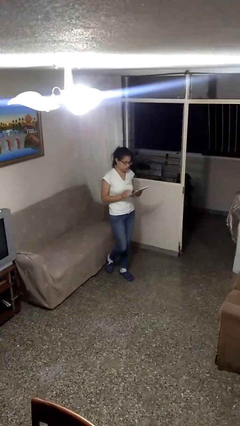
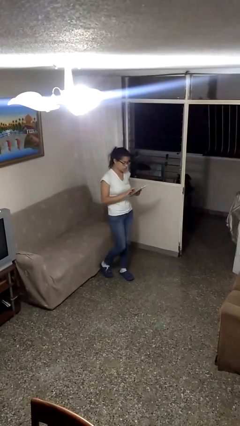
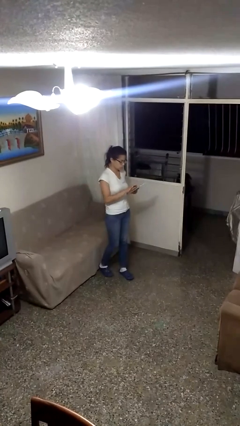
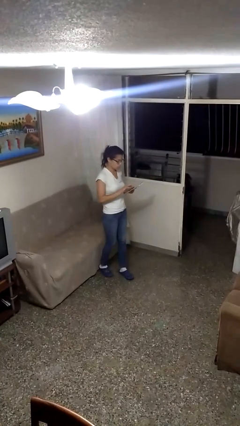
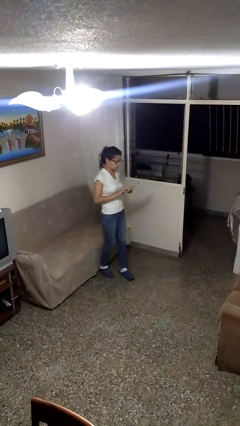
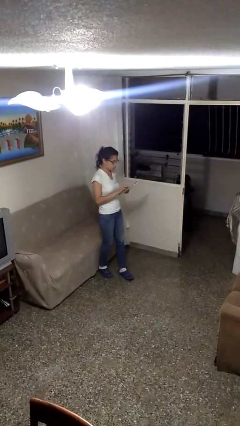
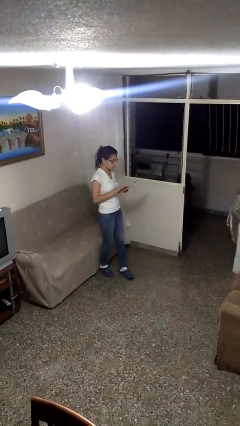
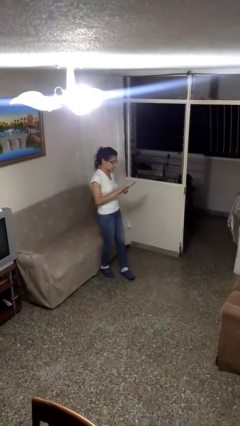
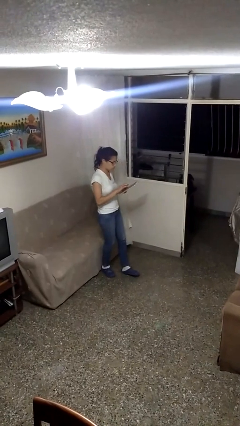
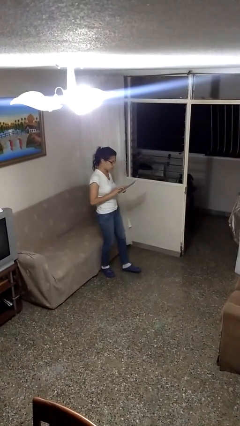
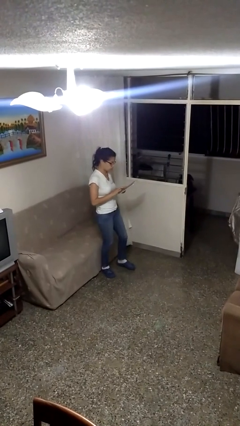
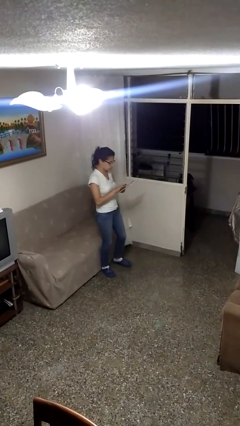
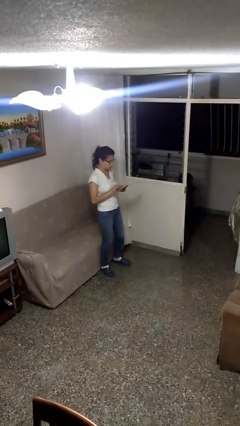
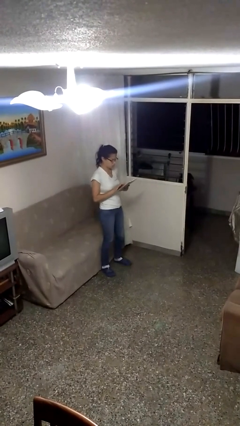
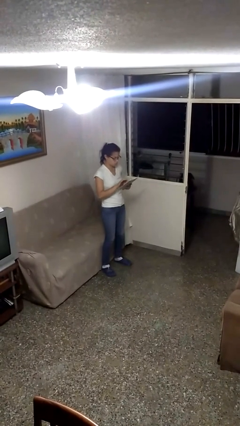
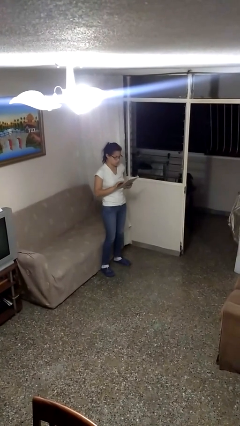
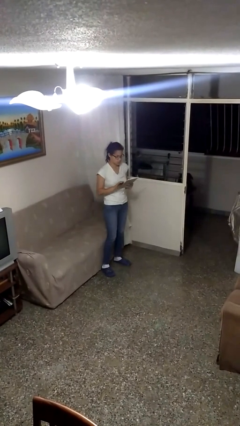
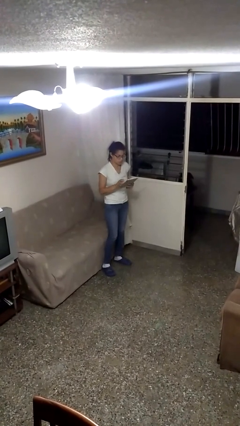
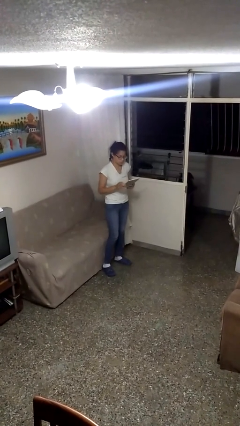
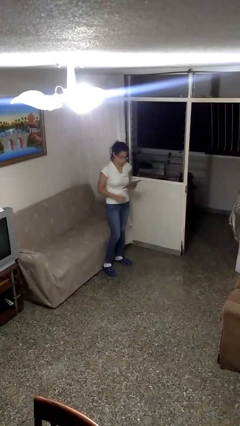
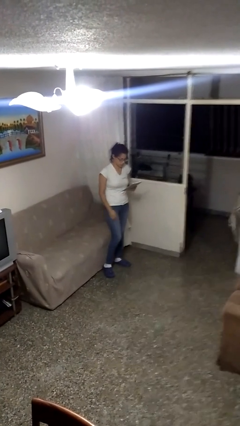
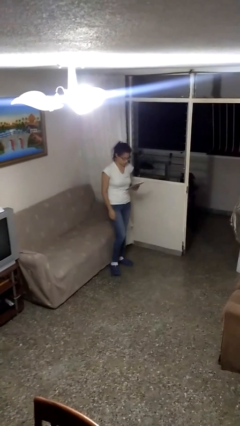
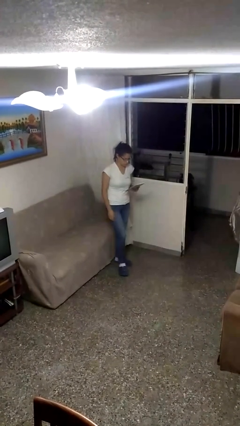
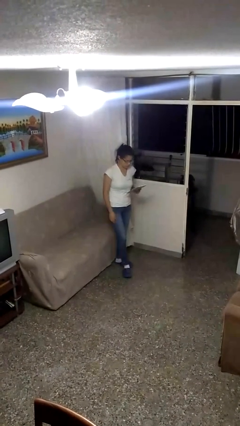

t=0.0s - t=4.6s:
person interacts with tablet

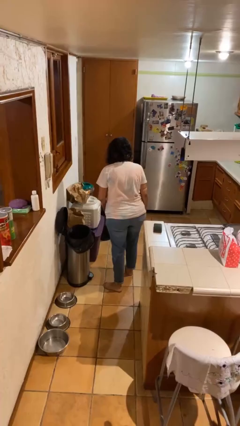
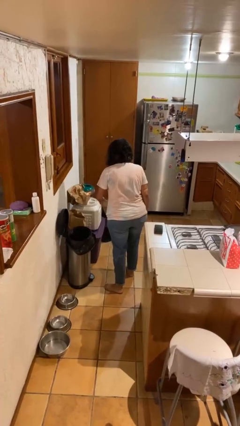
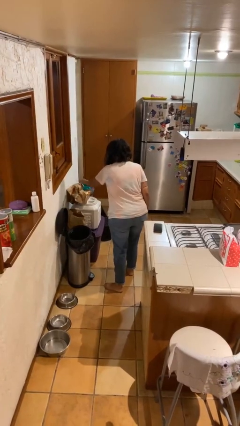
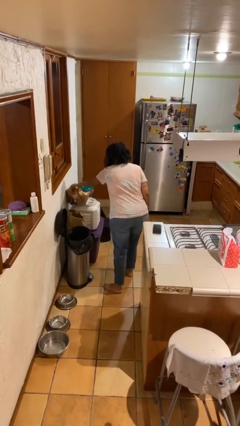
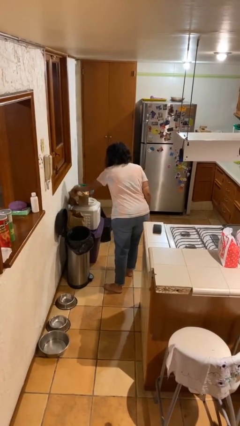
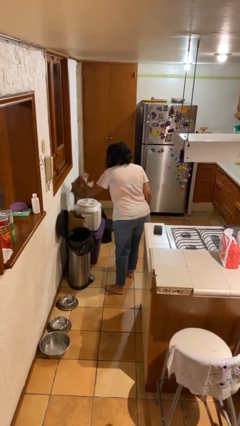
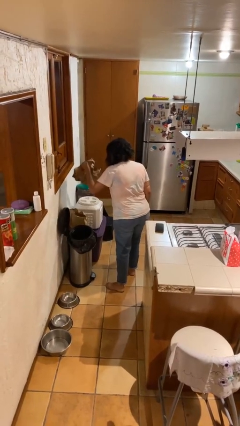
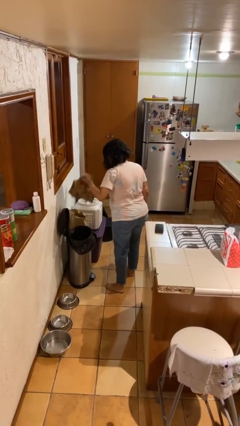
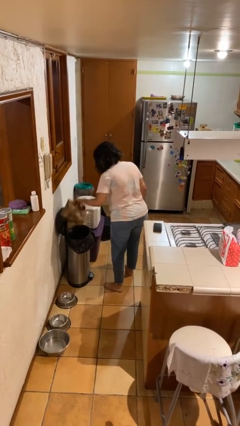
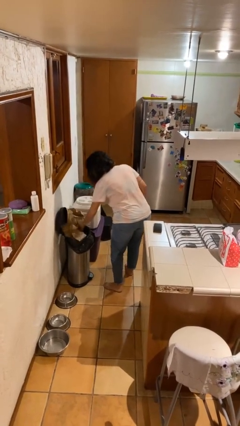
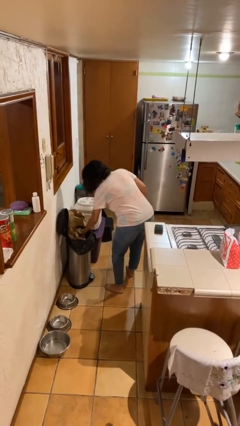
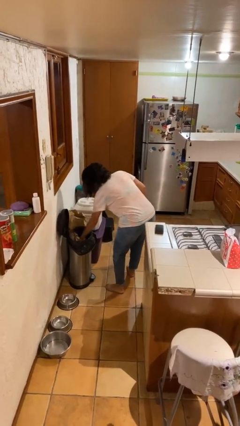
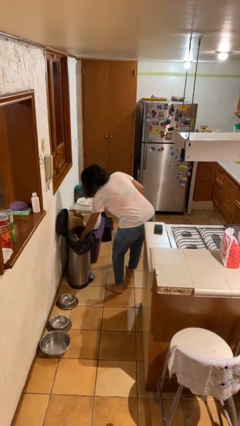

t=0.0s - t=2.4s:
person discards trash

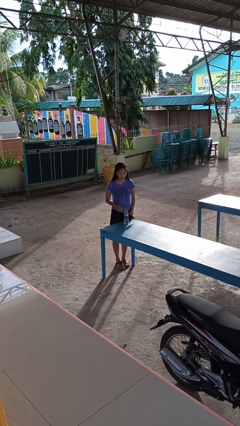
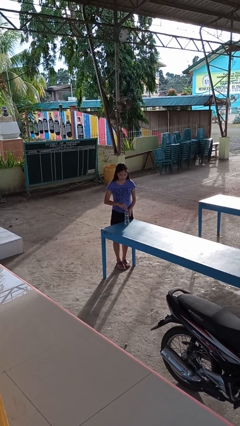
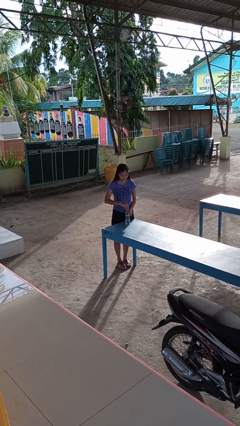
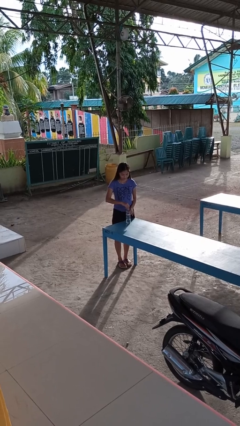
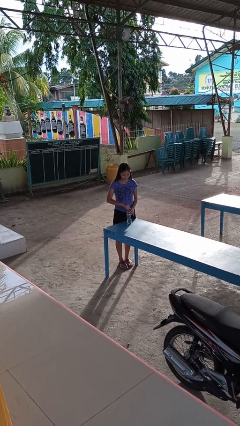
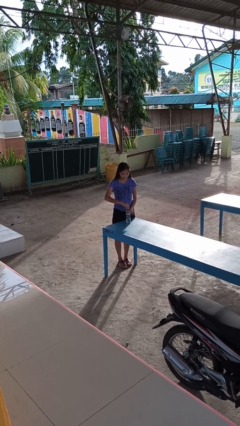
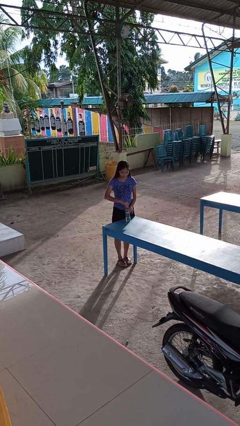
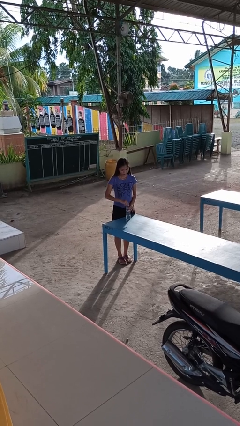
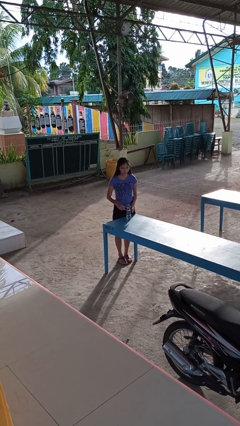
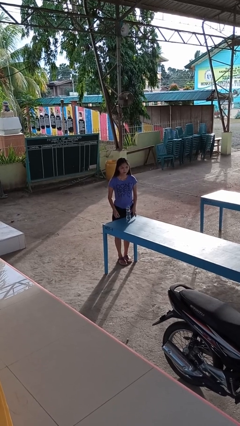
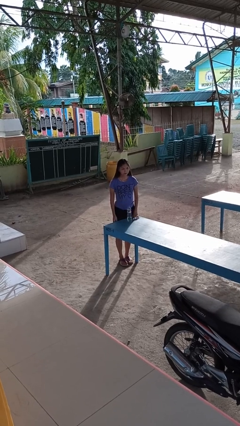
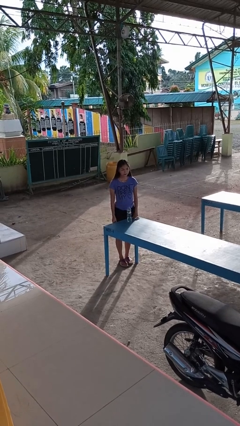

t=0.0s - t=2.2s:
person screws lid to bottle

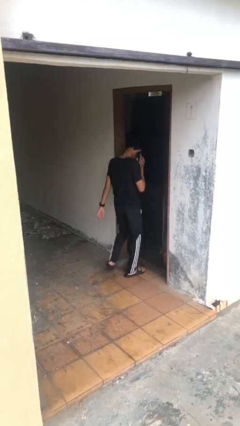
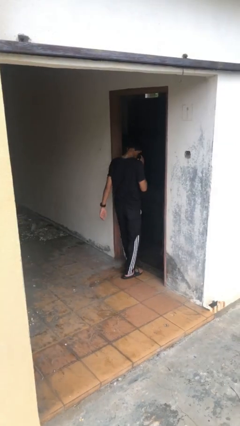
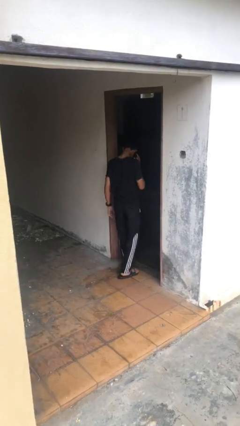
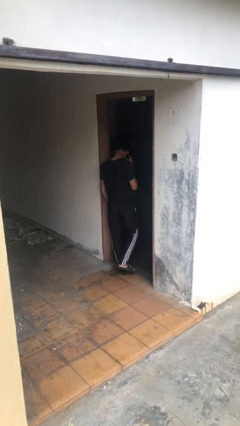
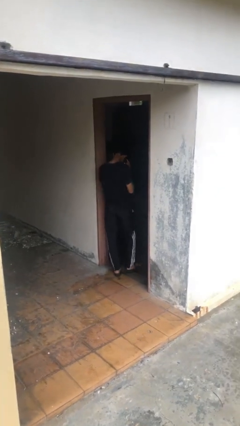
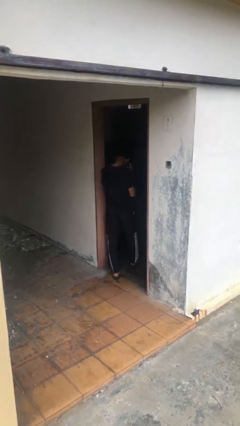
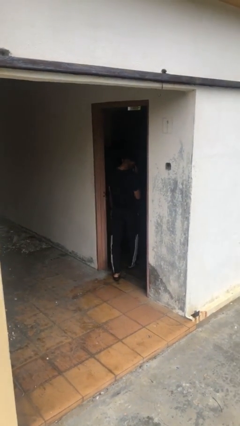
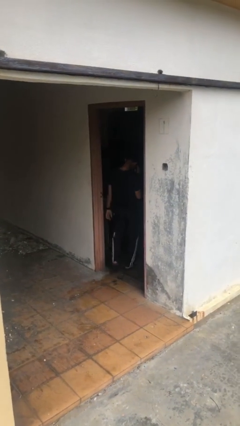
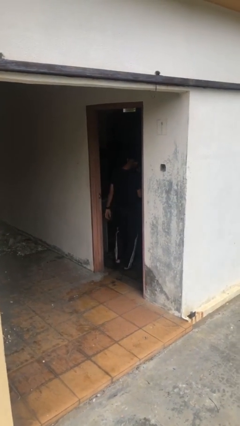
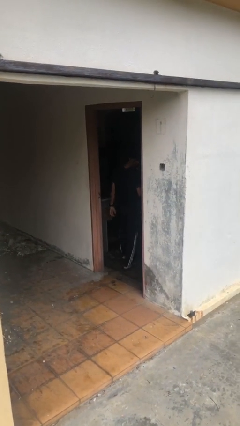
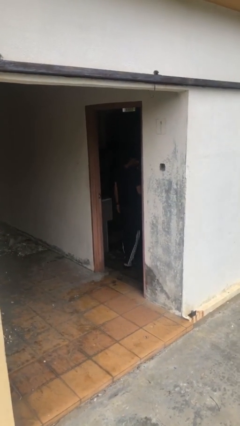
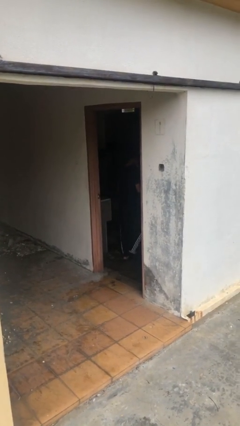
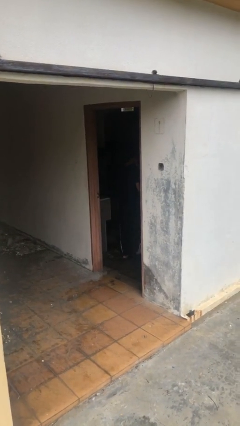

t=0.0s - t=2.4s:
person exits scene through structure

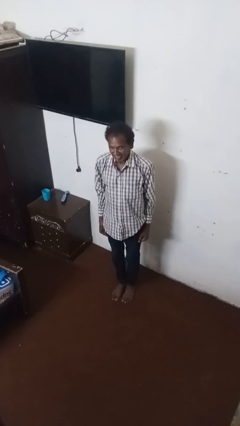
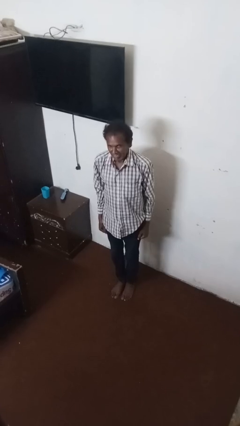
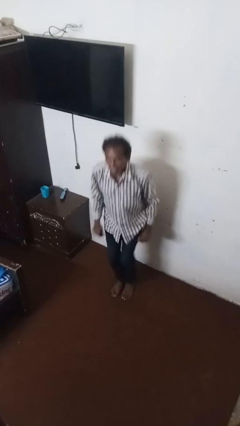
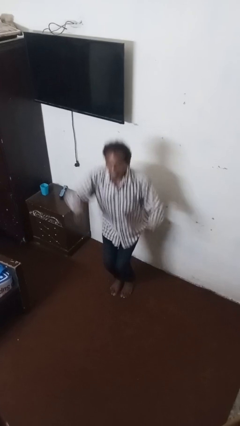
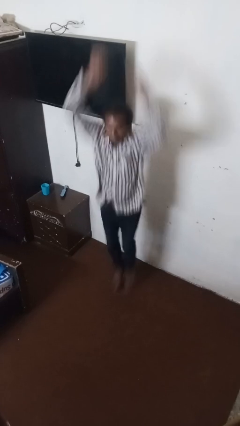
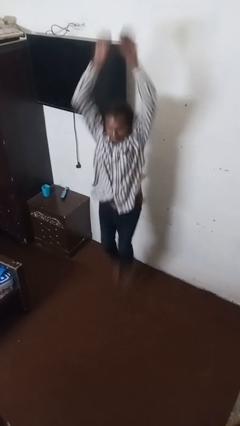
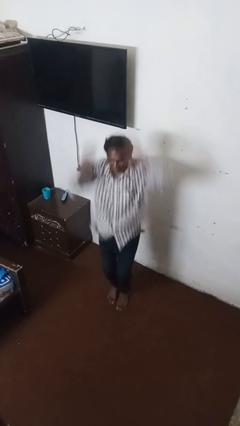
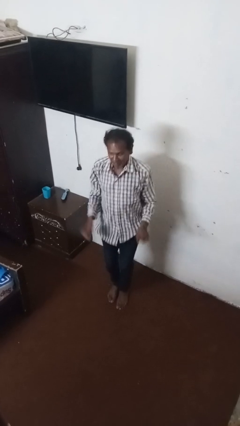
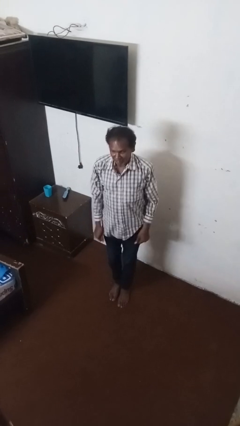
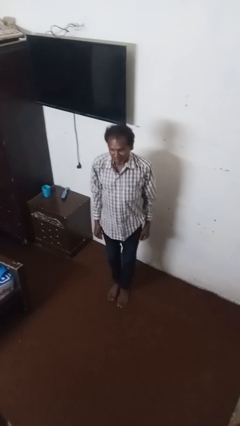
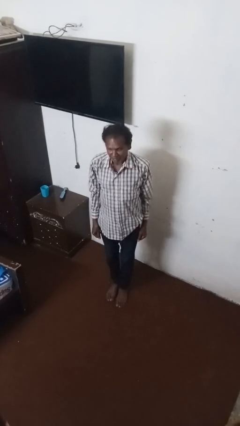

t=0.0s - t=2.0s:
person jumps

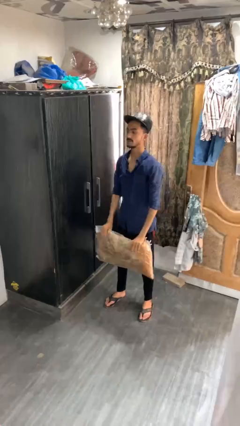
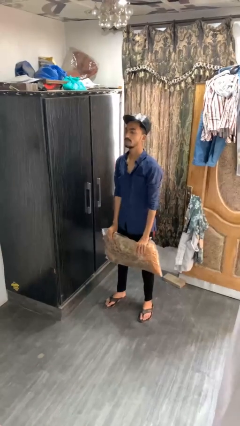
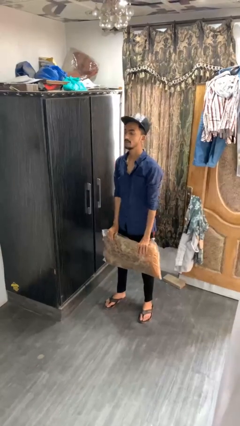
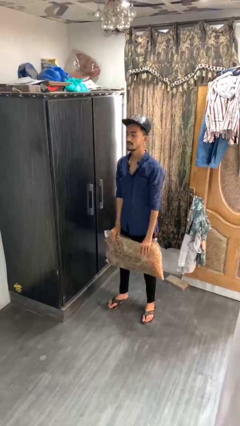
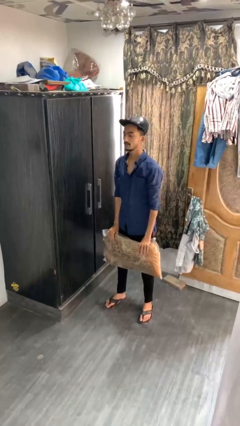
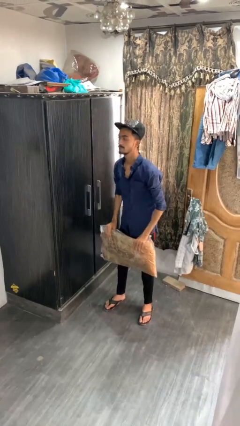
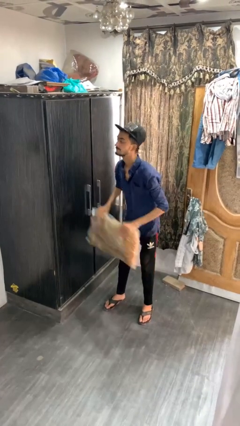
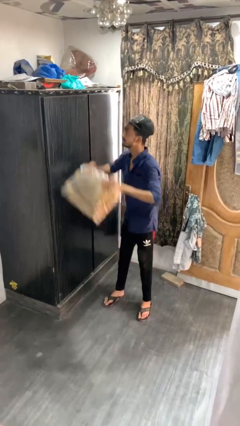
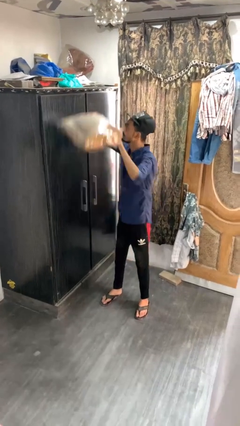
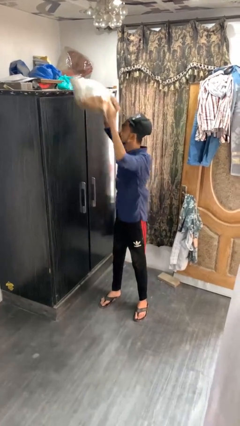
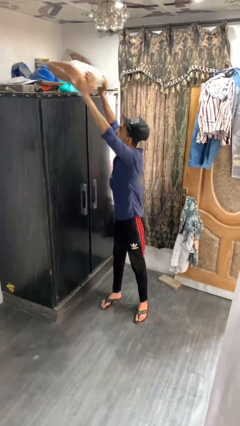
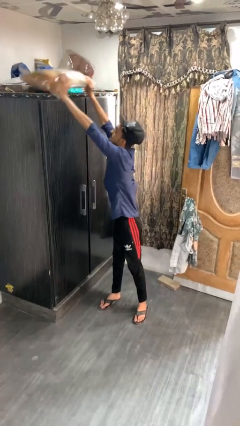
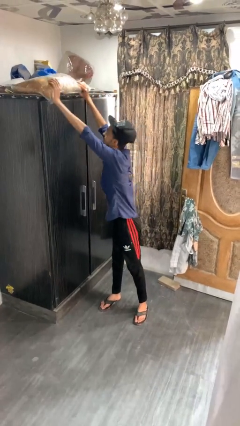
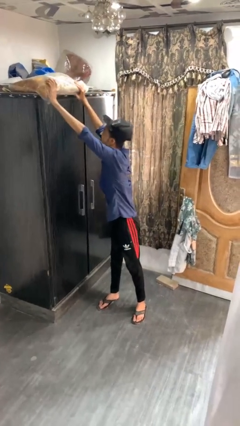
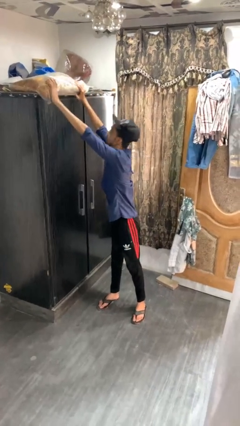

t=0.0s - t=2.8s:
person puts down object on shelf
